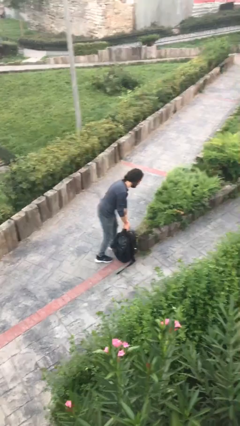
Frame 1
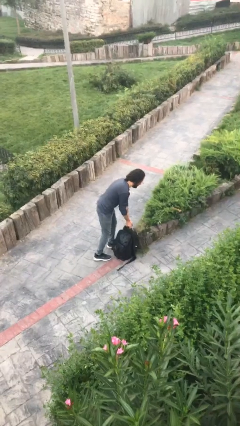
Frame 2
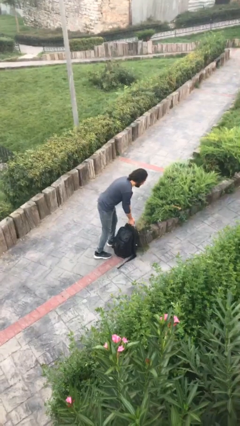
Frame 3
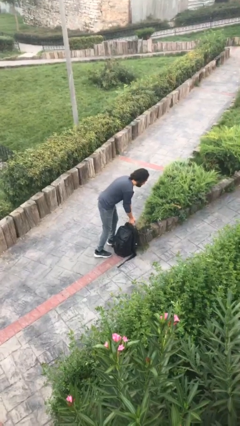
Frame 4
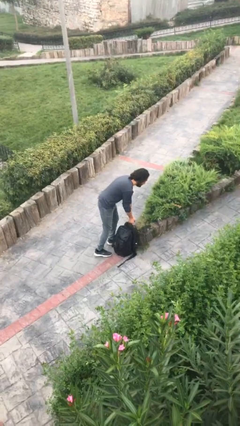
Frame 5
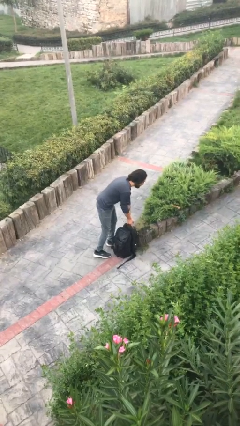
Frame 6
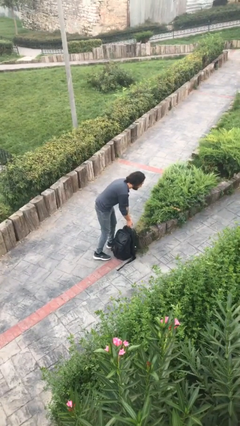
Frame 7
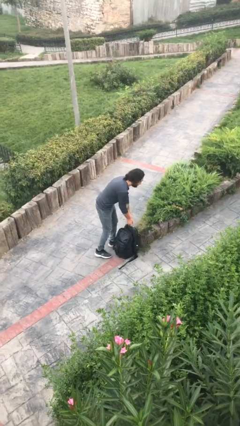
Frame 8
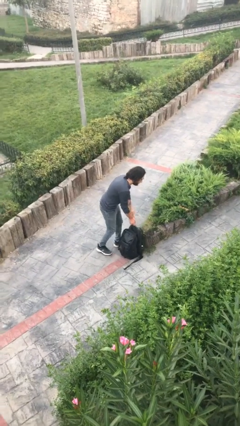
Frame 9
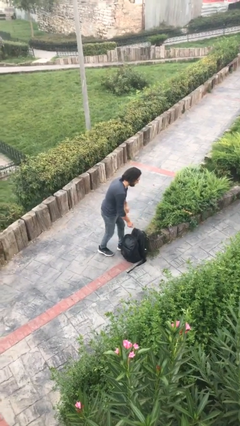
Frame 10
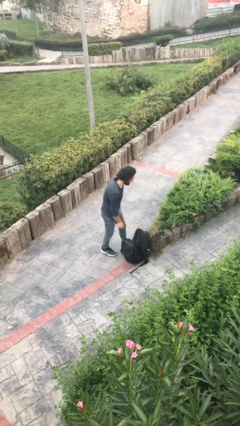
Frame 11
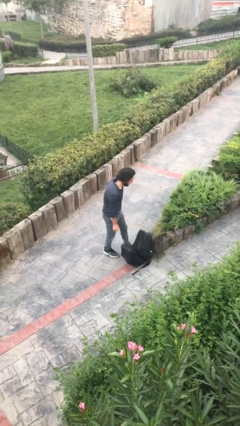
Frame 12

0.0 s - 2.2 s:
person puts down object on floor

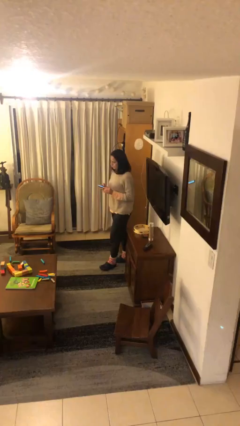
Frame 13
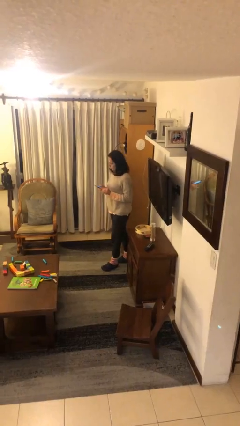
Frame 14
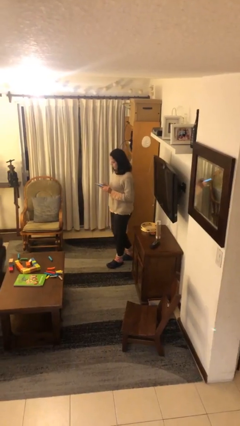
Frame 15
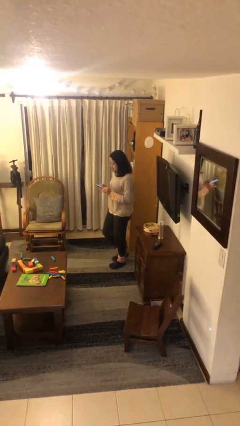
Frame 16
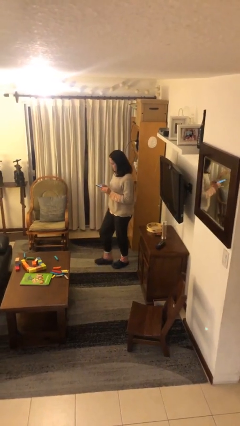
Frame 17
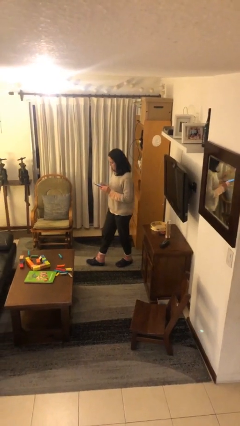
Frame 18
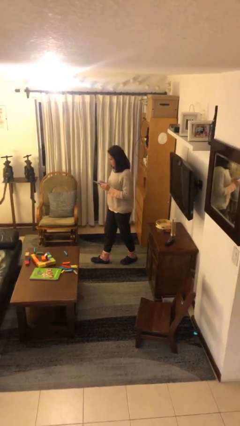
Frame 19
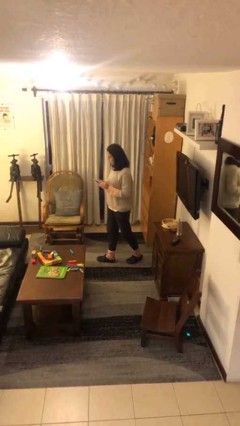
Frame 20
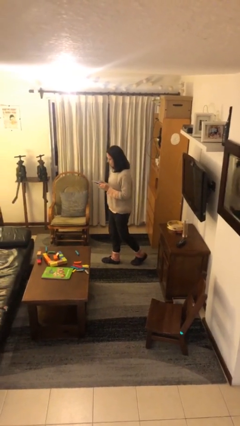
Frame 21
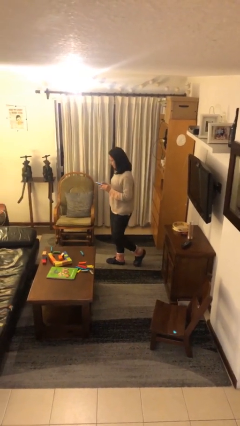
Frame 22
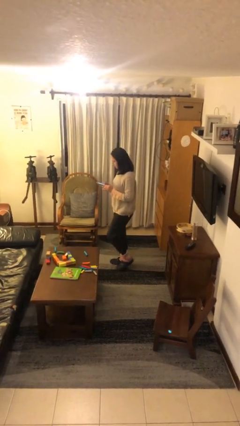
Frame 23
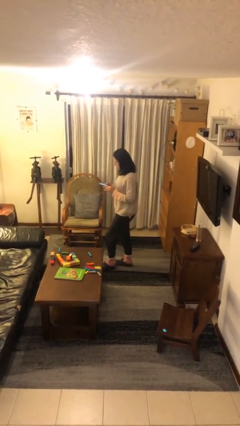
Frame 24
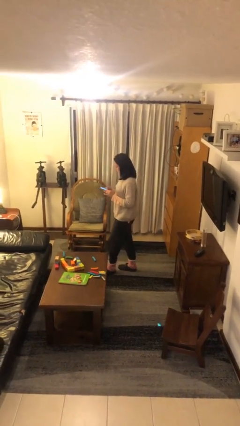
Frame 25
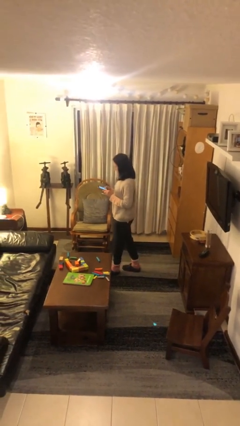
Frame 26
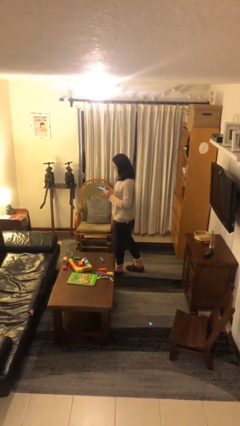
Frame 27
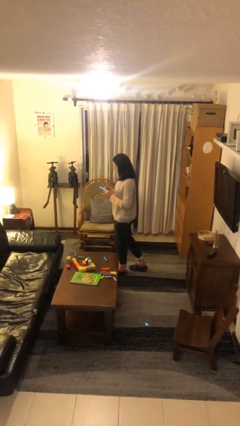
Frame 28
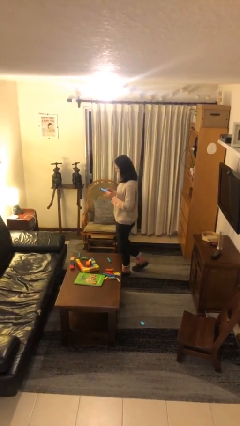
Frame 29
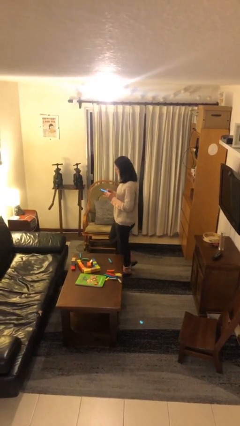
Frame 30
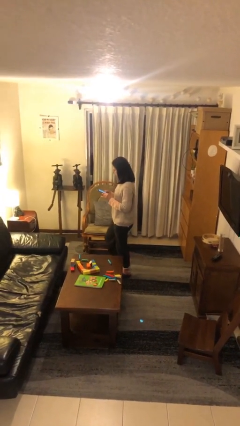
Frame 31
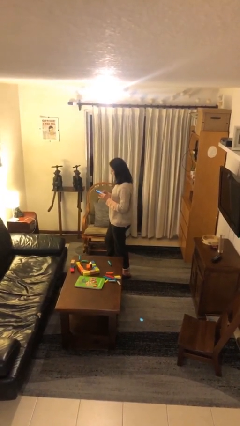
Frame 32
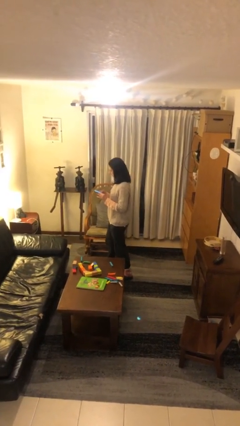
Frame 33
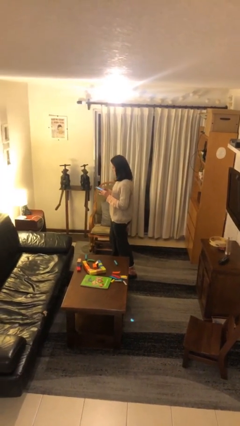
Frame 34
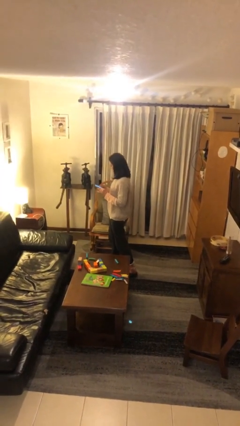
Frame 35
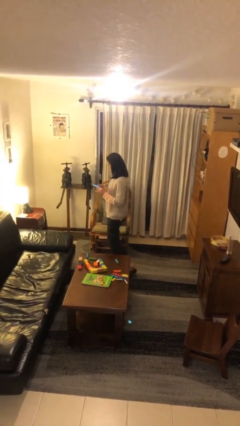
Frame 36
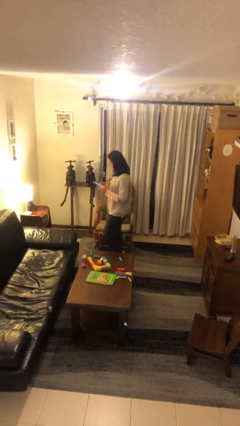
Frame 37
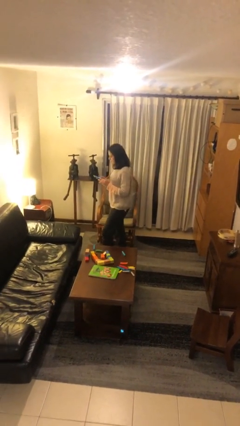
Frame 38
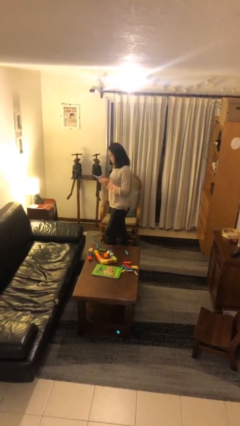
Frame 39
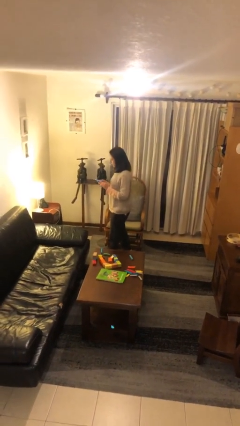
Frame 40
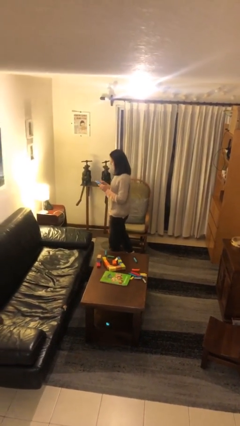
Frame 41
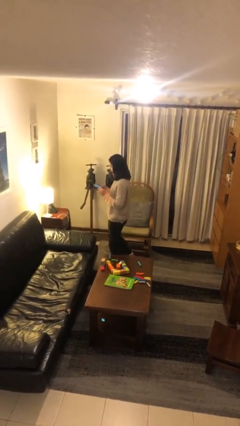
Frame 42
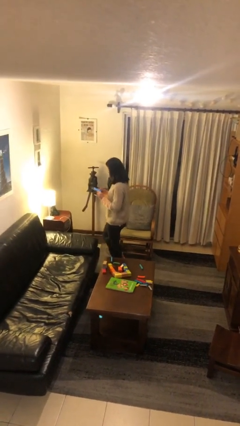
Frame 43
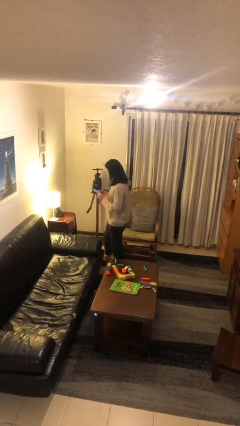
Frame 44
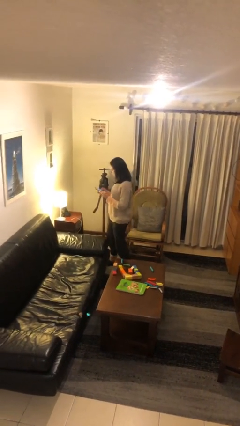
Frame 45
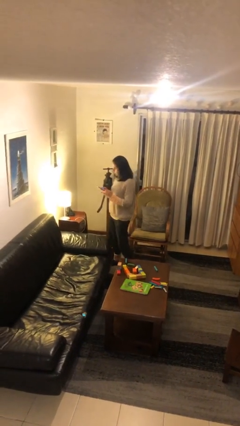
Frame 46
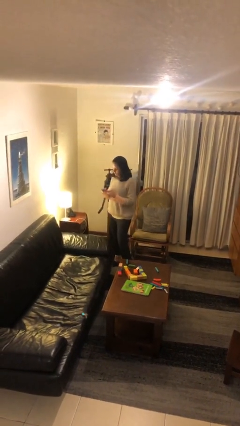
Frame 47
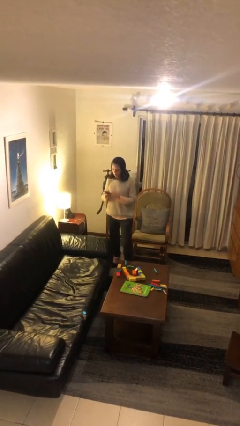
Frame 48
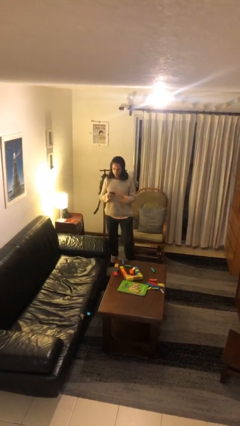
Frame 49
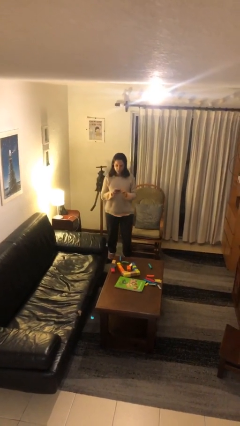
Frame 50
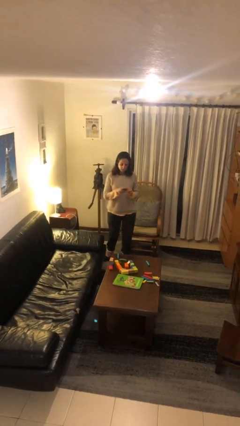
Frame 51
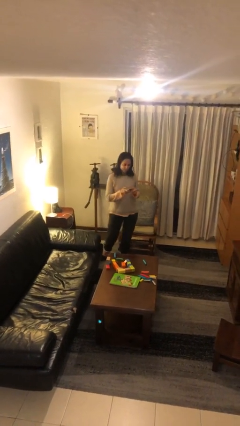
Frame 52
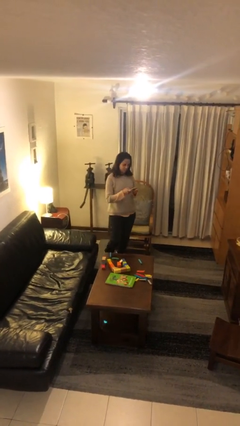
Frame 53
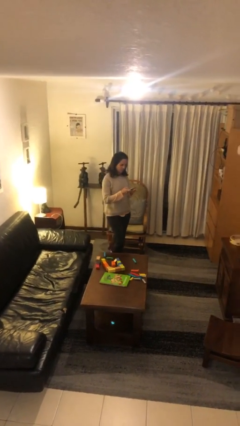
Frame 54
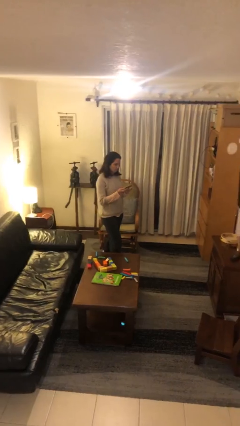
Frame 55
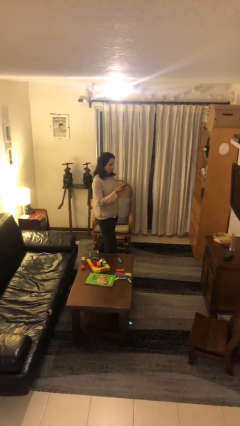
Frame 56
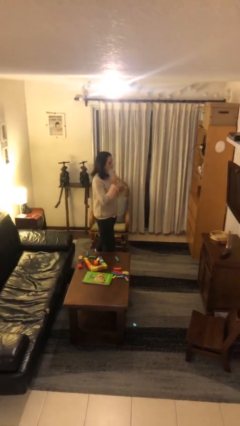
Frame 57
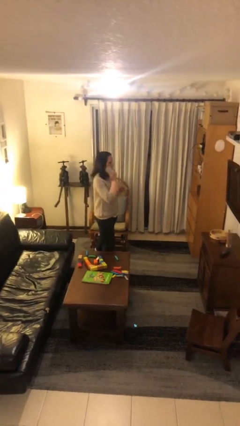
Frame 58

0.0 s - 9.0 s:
person texts on phone

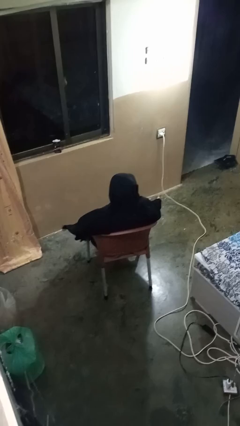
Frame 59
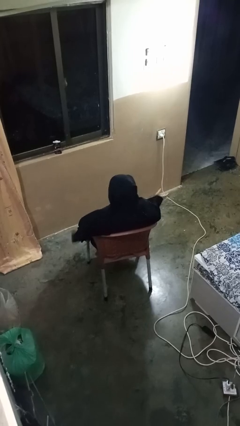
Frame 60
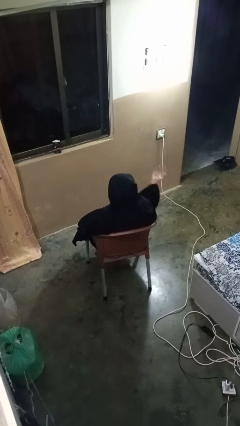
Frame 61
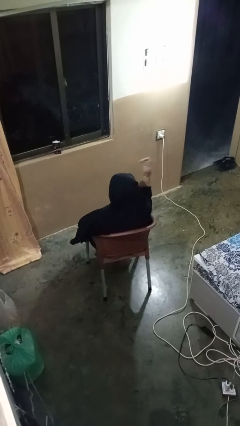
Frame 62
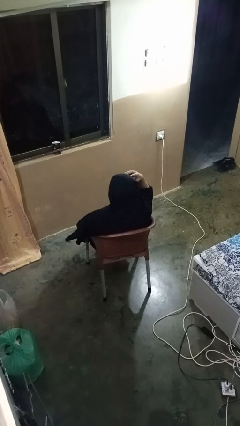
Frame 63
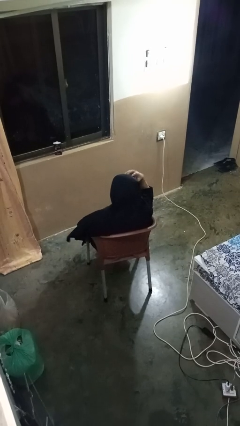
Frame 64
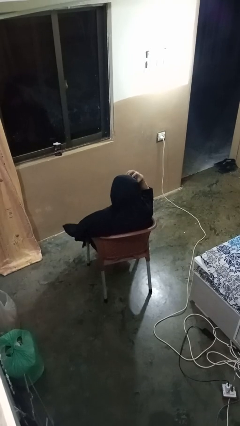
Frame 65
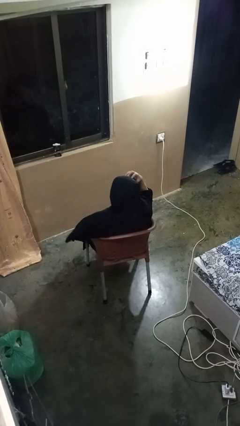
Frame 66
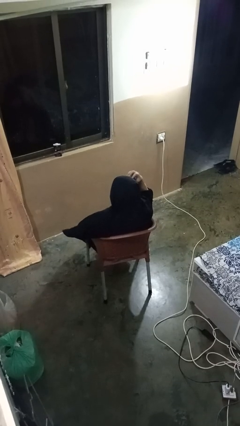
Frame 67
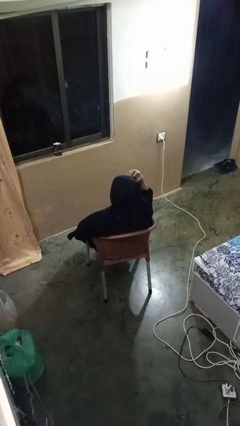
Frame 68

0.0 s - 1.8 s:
person scratches face

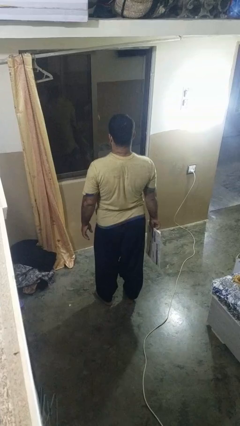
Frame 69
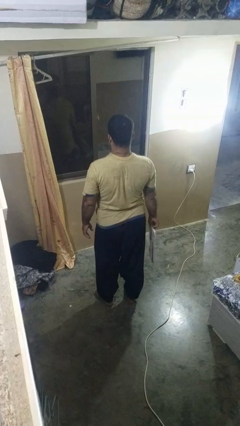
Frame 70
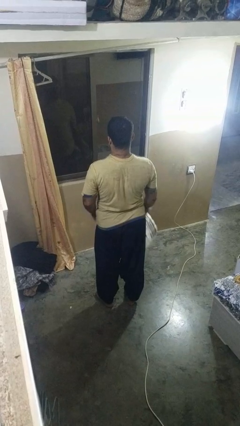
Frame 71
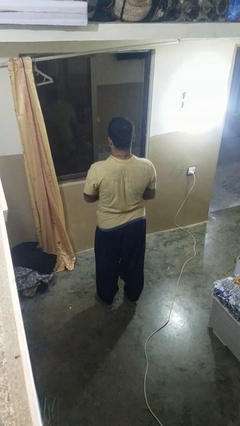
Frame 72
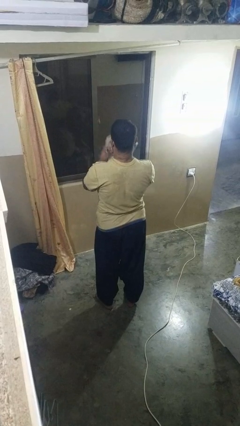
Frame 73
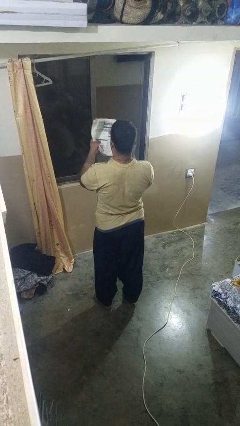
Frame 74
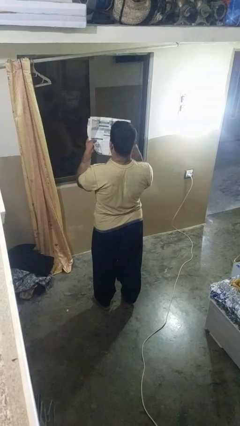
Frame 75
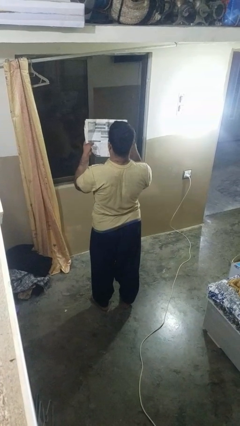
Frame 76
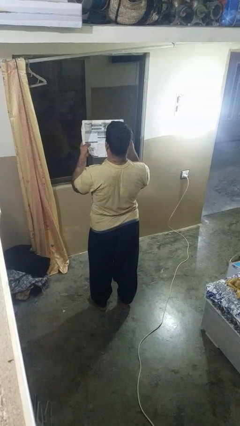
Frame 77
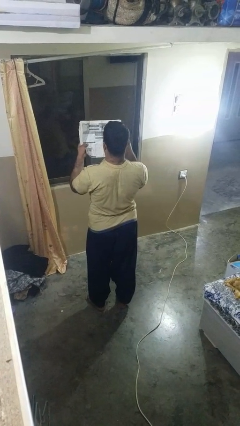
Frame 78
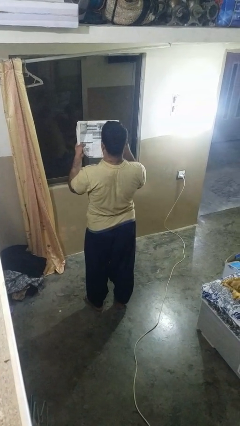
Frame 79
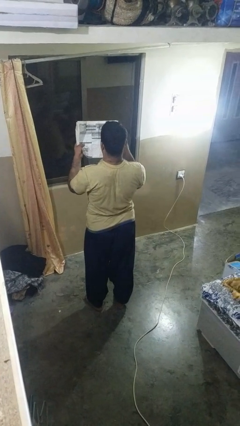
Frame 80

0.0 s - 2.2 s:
person reads newspaper

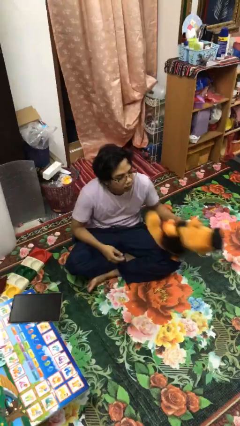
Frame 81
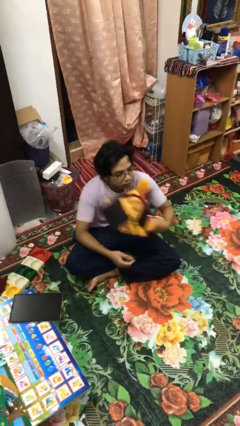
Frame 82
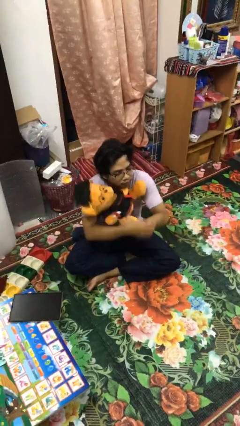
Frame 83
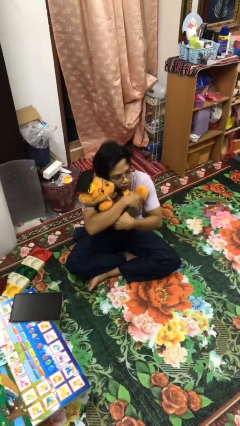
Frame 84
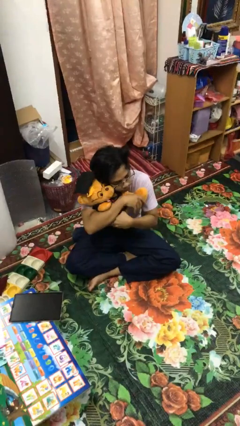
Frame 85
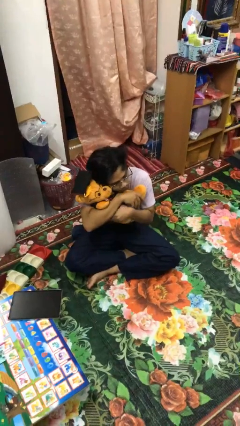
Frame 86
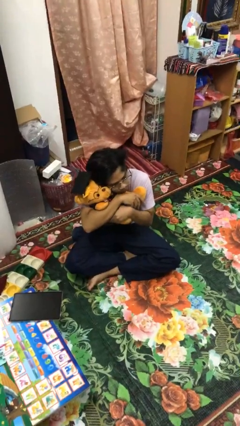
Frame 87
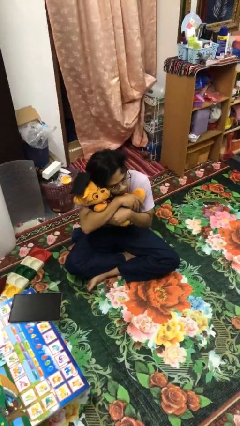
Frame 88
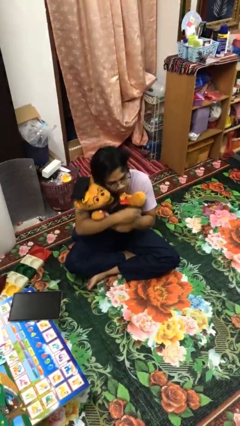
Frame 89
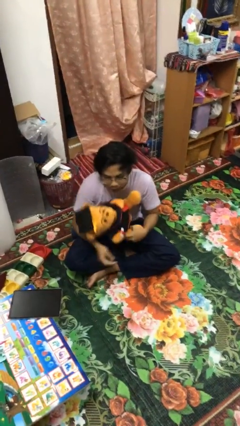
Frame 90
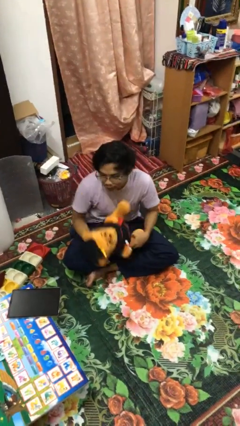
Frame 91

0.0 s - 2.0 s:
person hugs stuffed animal

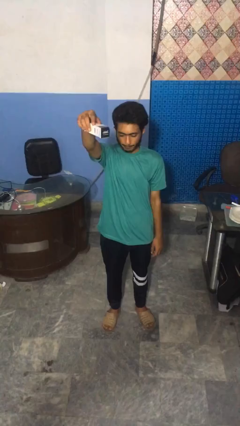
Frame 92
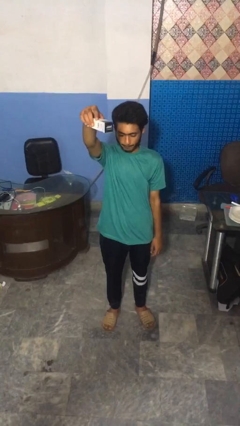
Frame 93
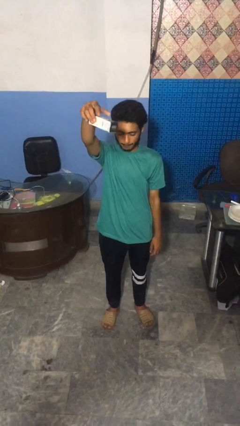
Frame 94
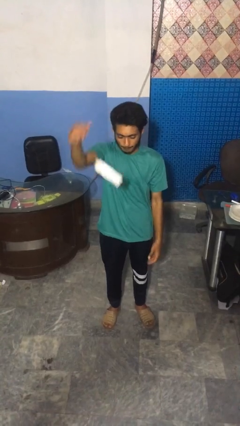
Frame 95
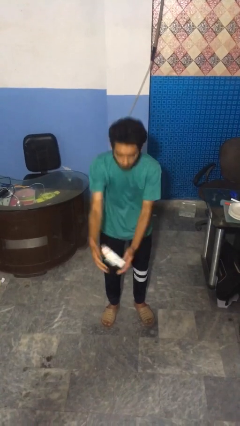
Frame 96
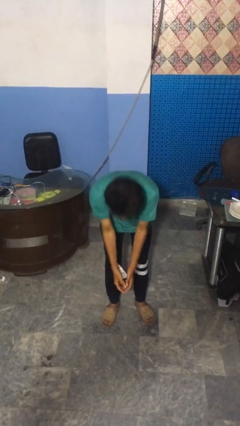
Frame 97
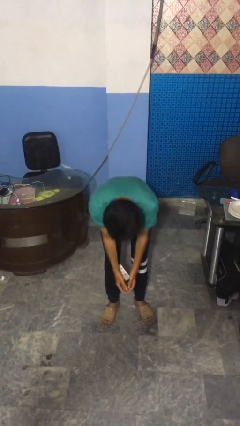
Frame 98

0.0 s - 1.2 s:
person drops object
